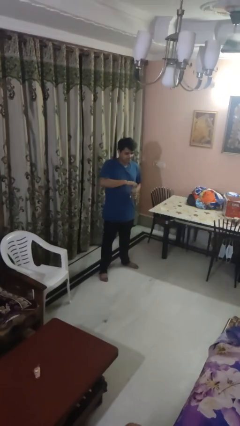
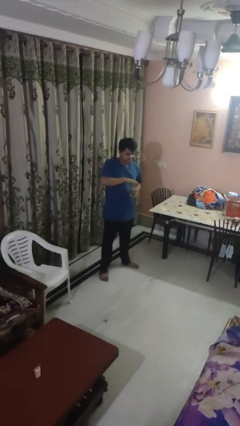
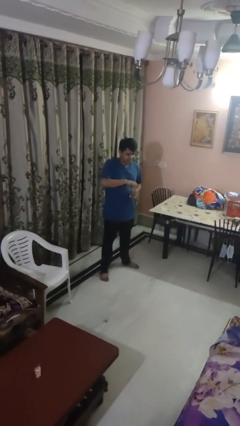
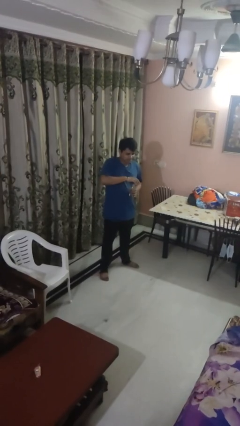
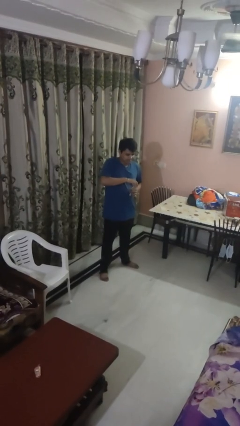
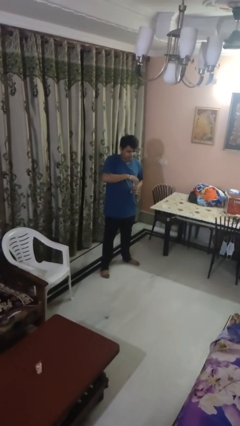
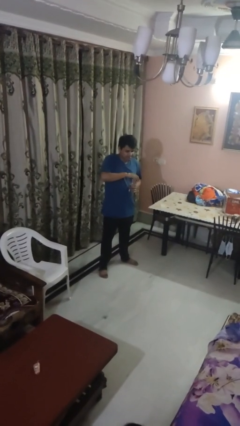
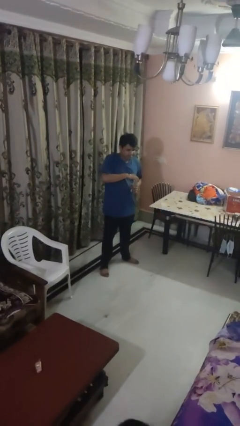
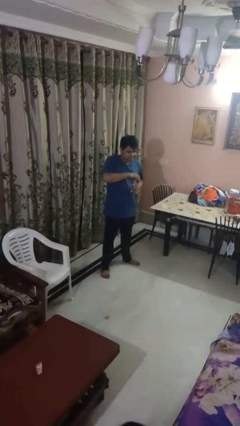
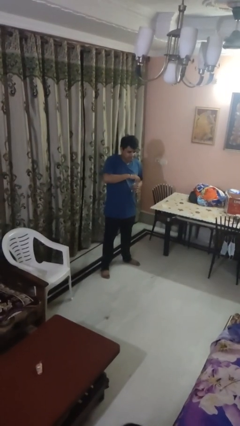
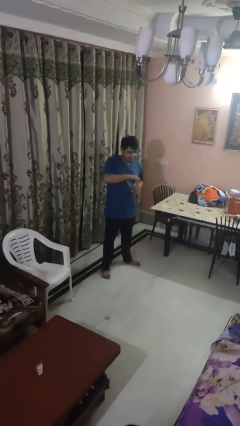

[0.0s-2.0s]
person unscrews lid from bottle

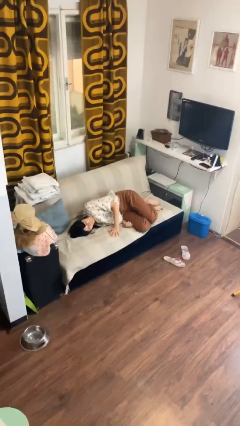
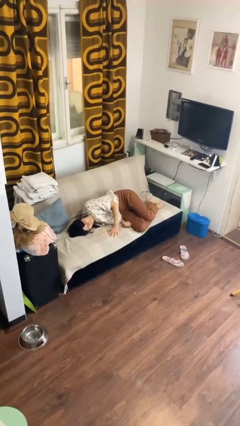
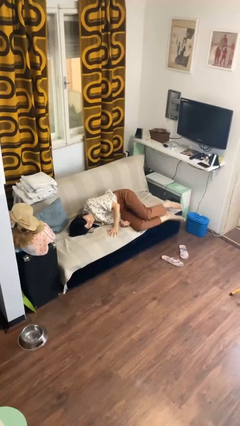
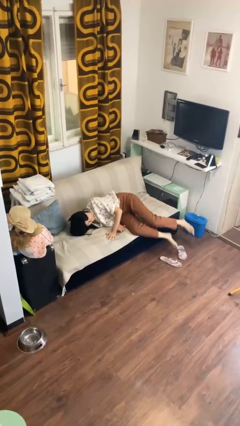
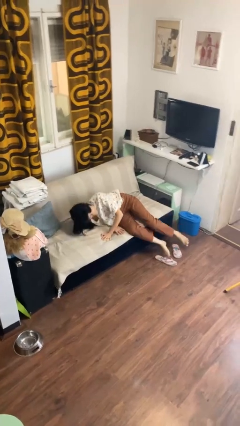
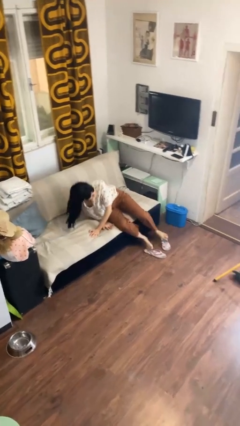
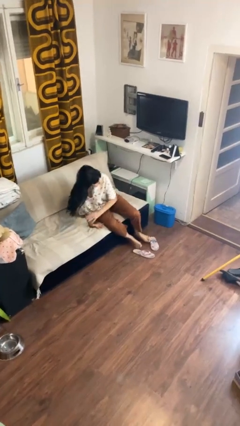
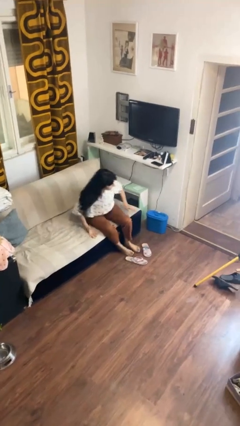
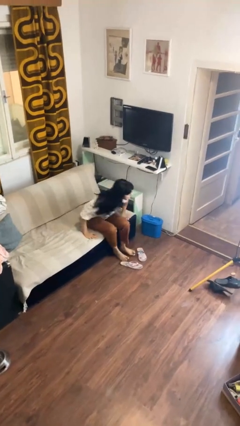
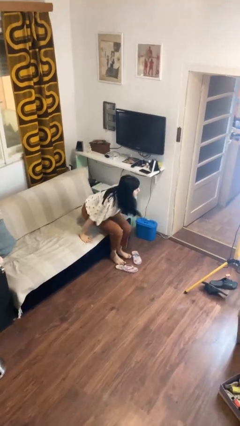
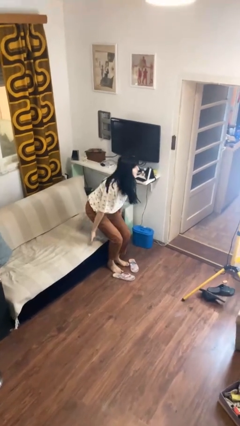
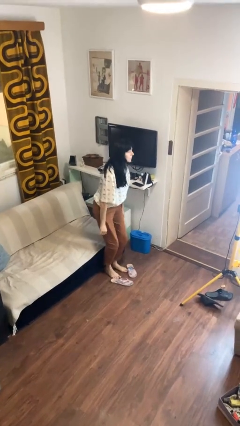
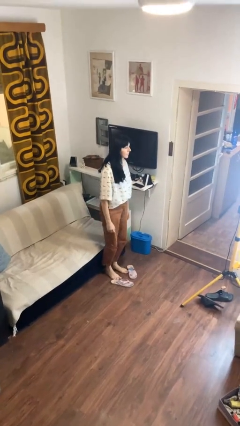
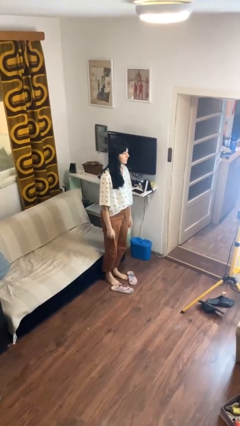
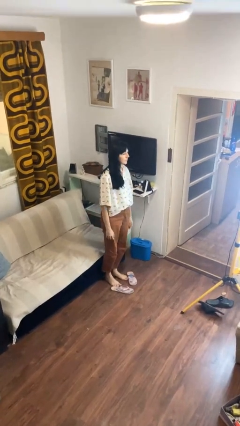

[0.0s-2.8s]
person stands up

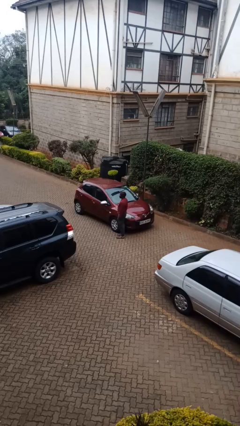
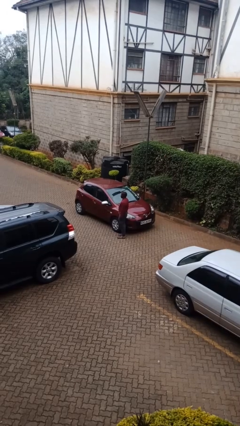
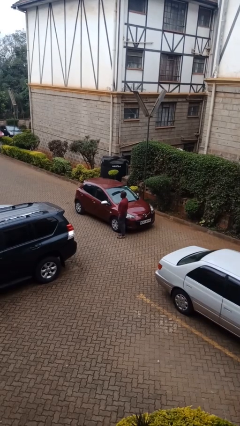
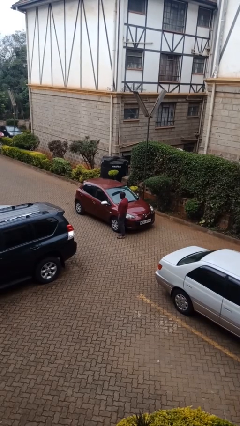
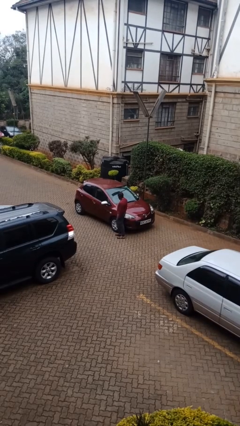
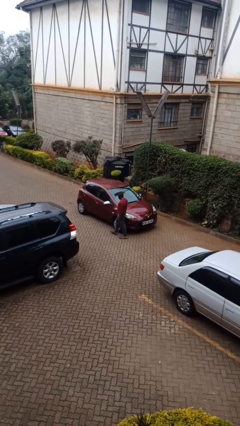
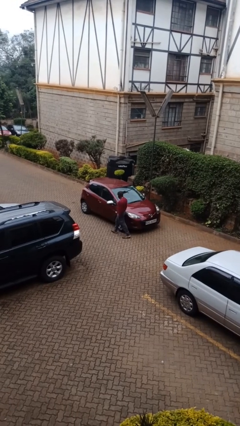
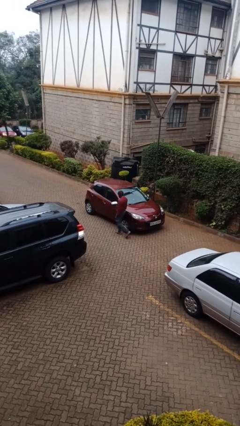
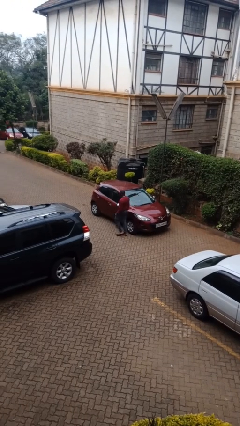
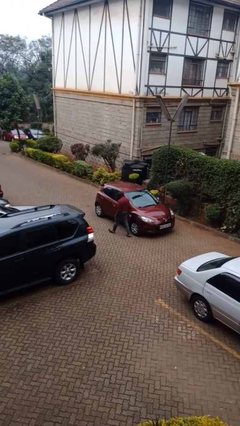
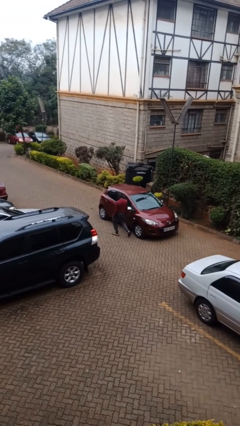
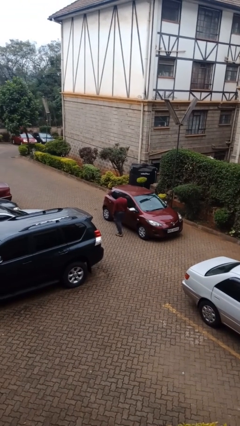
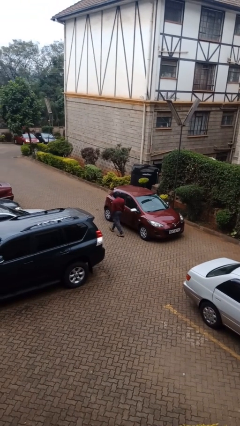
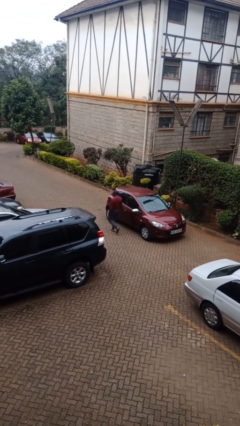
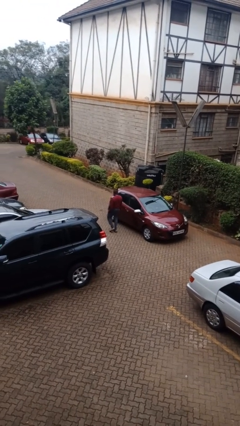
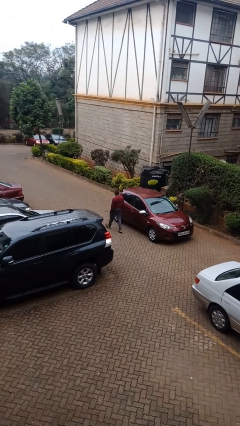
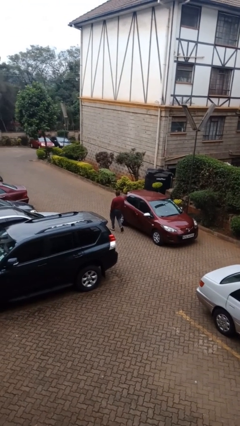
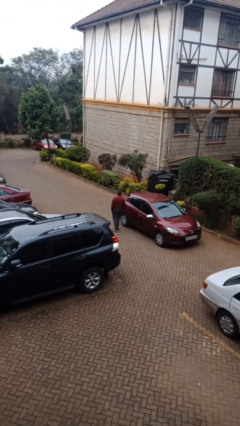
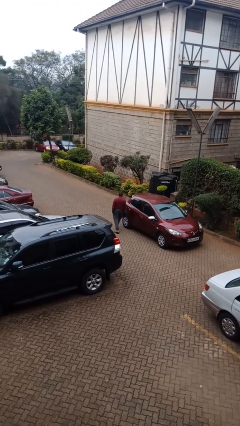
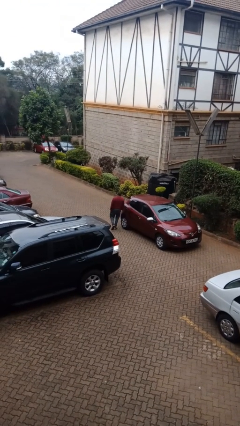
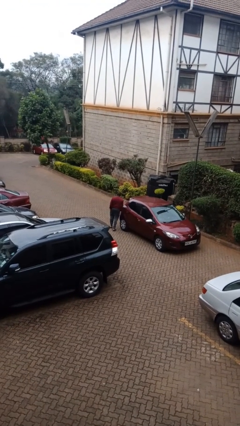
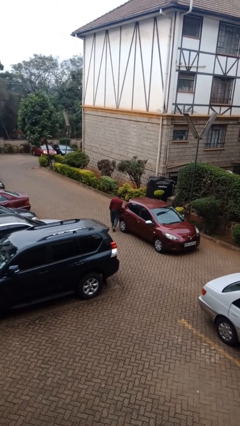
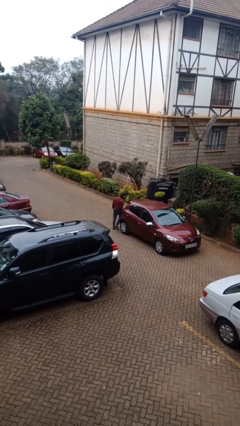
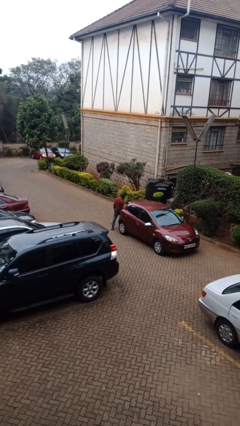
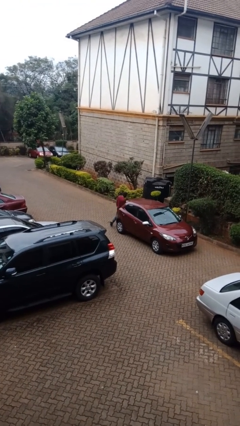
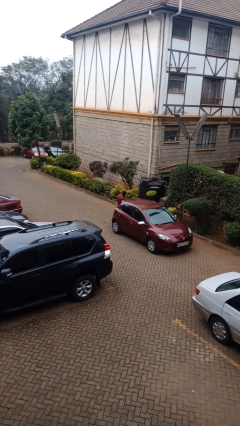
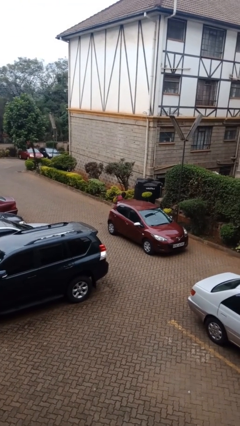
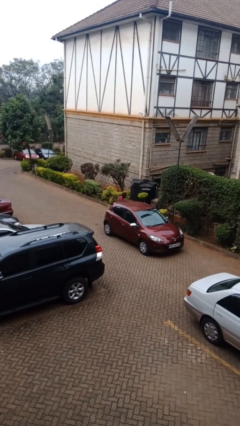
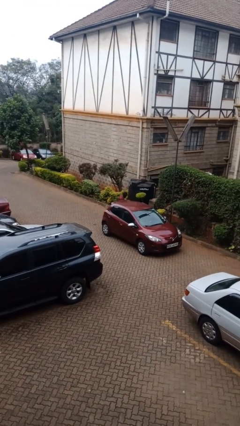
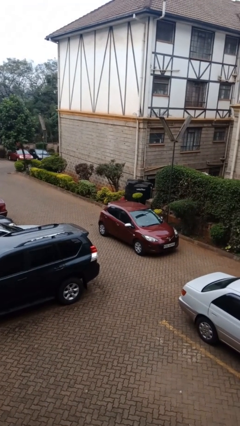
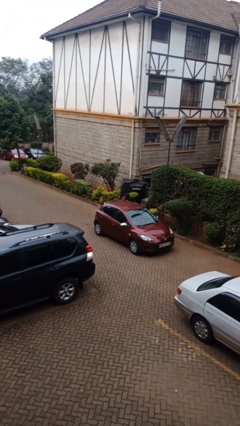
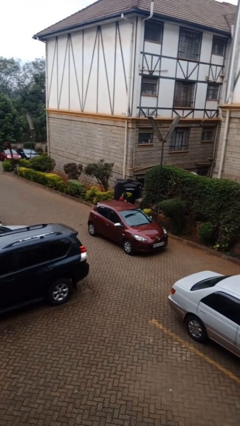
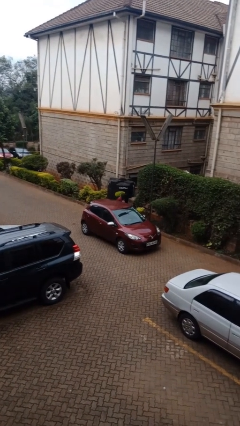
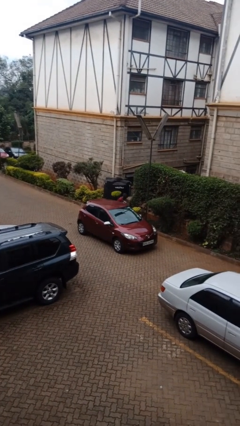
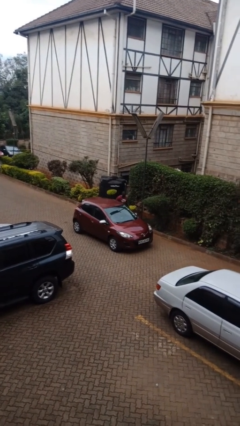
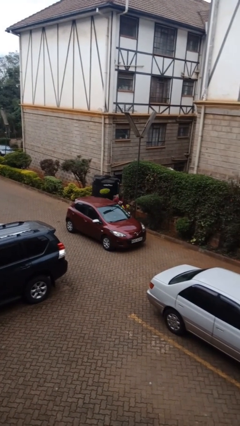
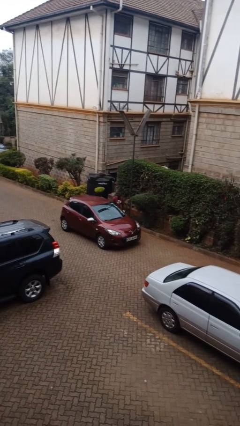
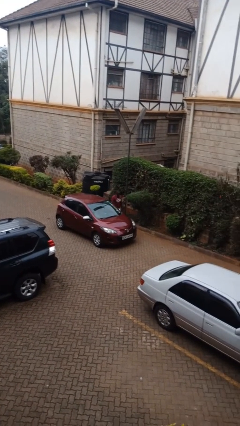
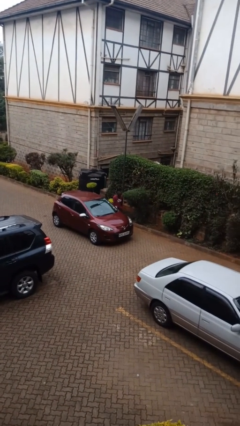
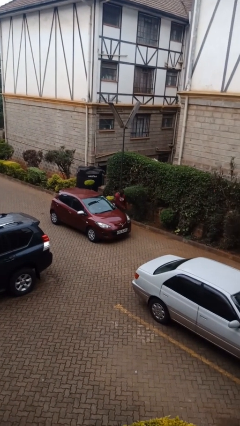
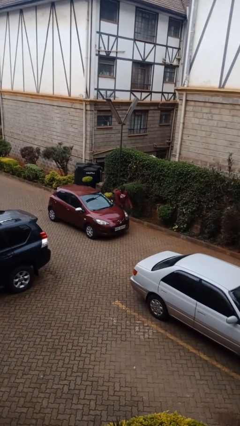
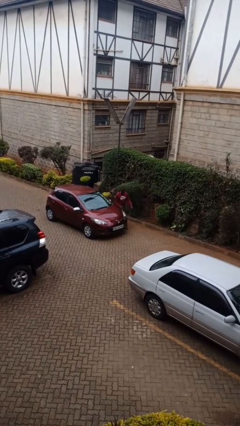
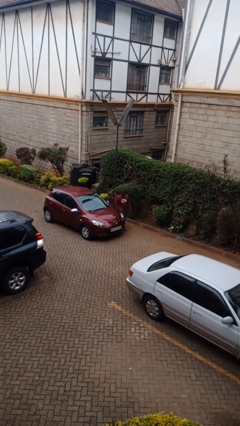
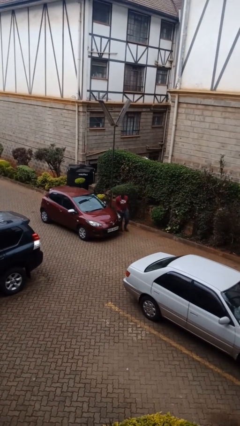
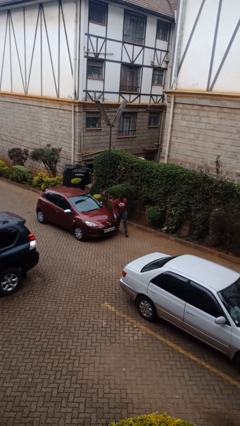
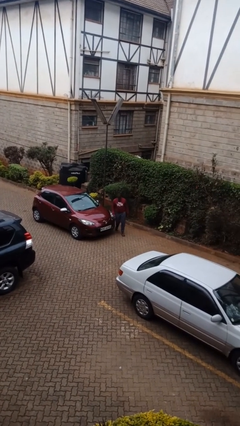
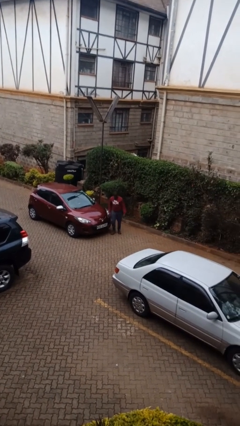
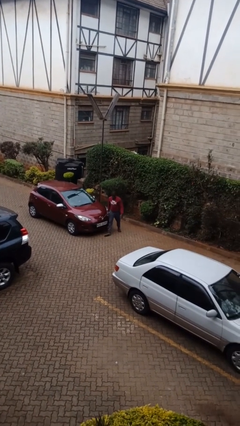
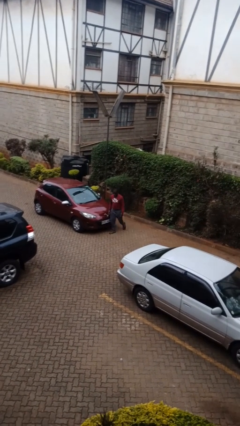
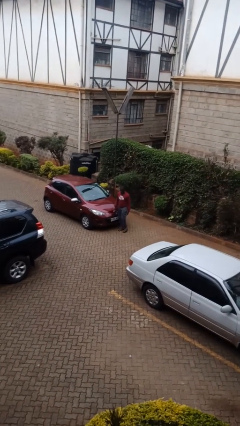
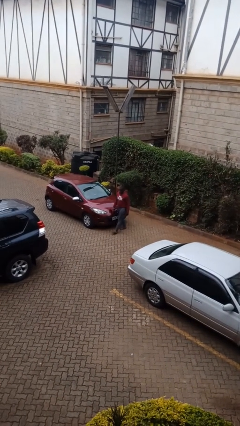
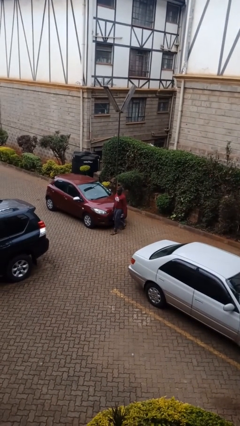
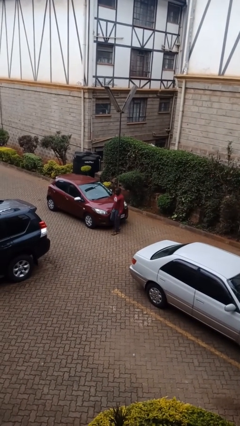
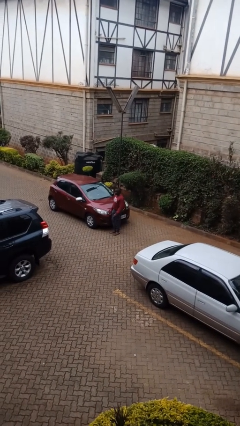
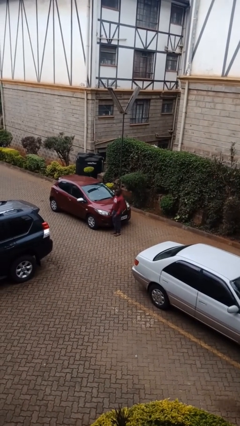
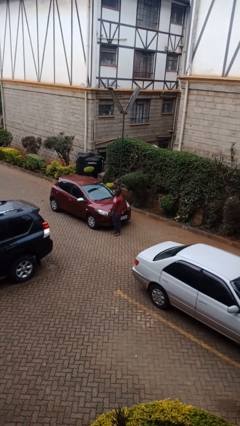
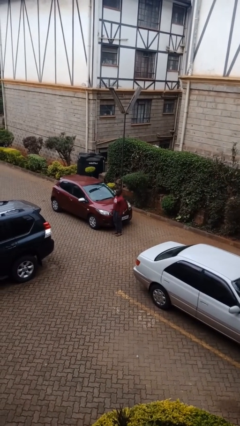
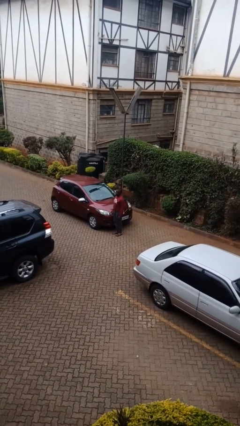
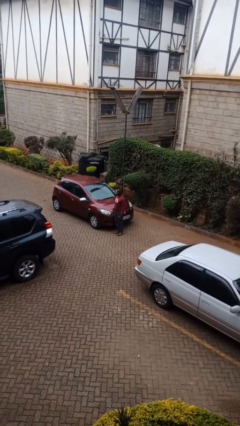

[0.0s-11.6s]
person walks around car

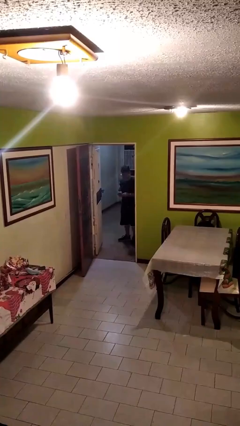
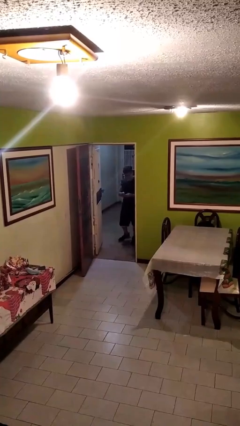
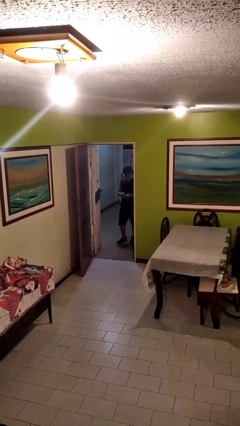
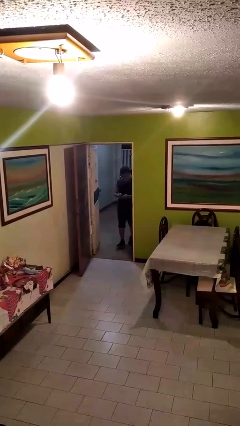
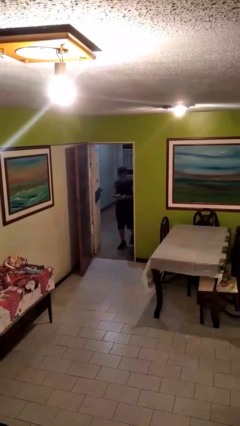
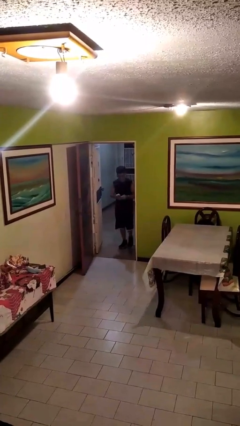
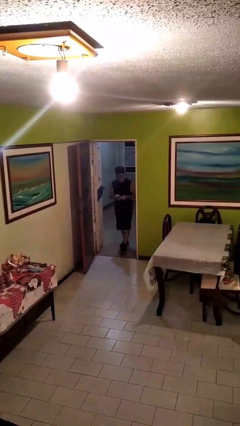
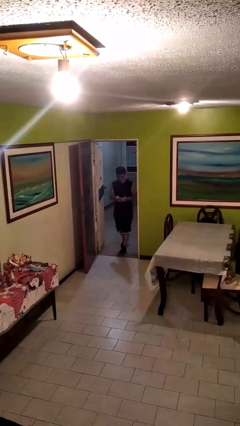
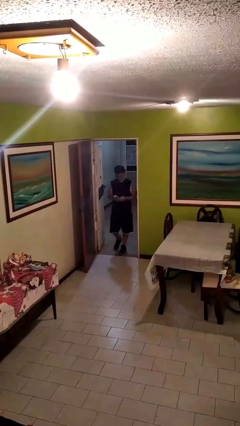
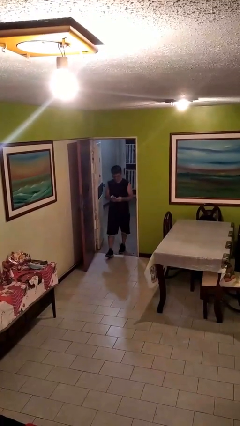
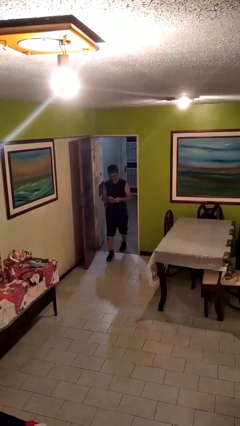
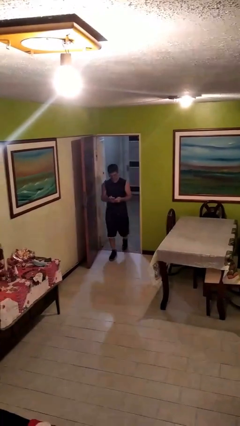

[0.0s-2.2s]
person enters scene through structure
